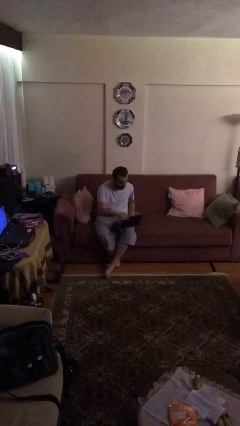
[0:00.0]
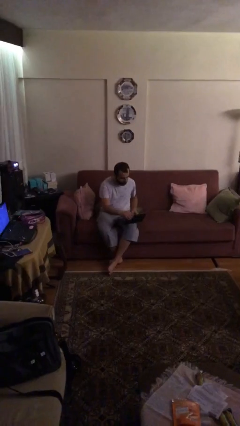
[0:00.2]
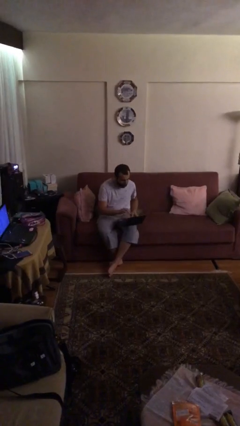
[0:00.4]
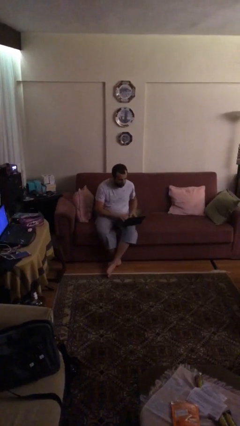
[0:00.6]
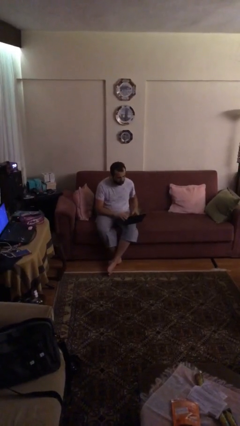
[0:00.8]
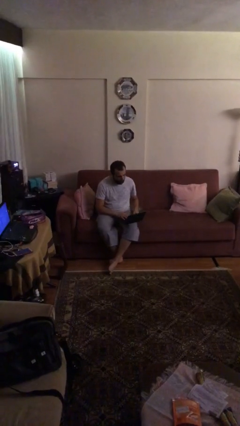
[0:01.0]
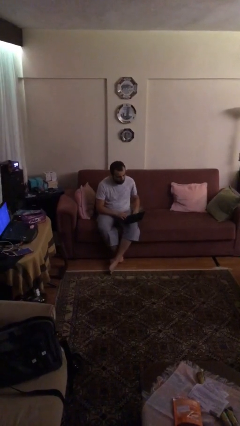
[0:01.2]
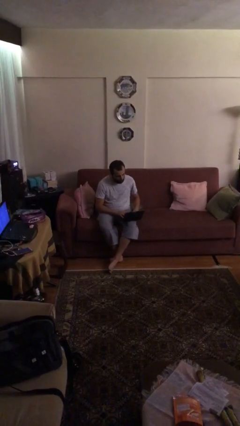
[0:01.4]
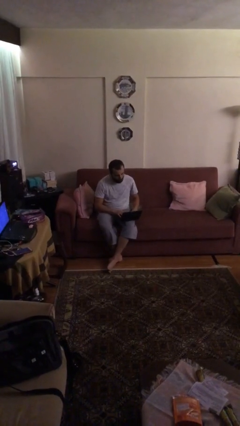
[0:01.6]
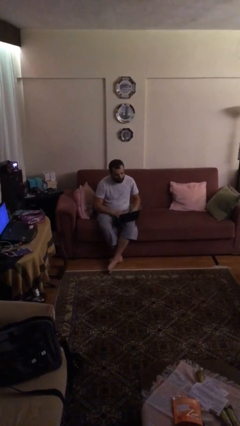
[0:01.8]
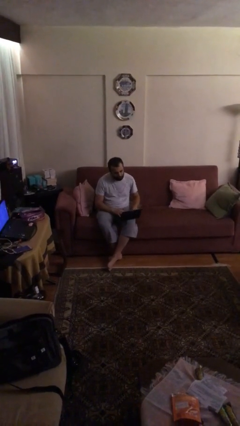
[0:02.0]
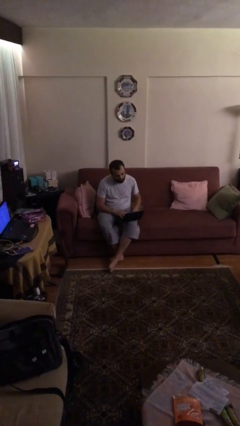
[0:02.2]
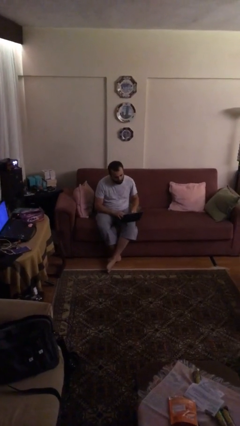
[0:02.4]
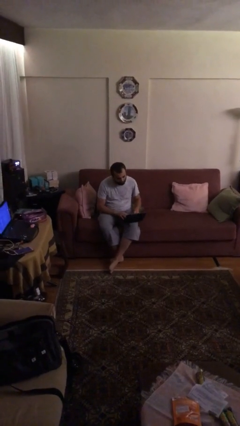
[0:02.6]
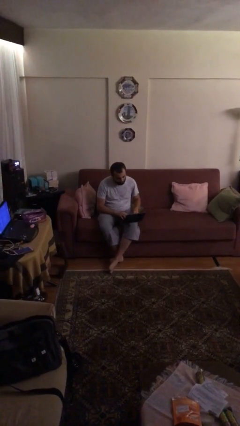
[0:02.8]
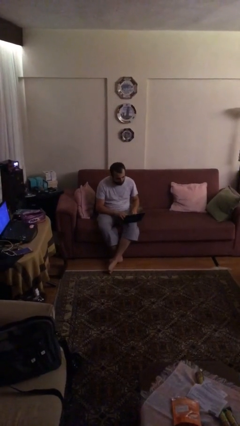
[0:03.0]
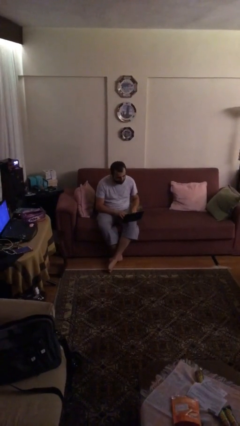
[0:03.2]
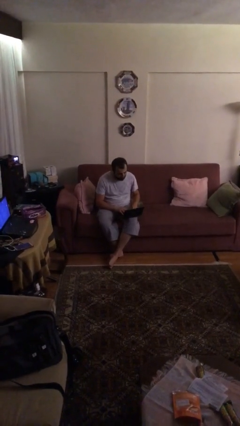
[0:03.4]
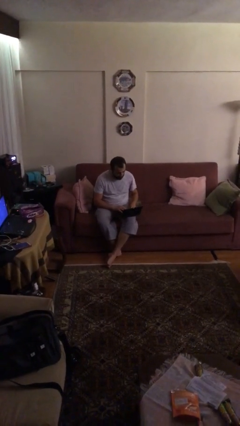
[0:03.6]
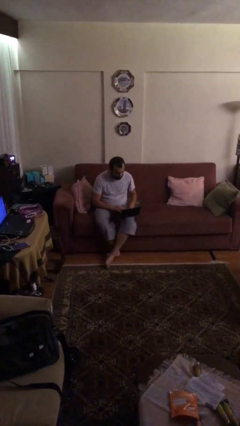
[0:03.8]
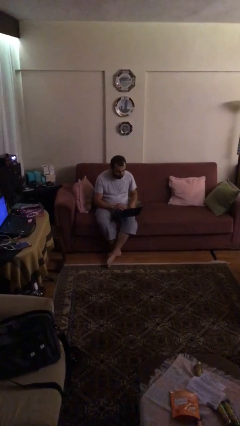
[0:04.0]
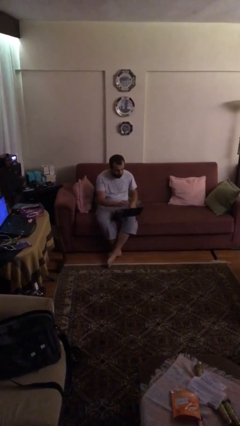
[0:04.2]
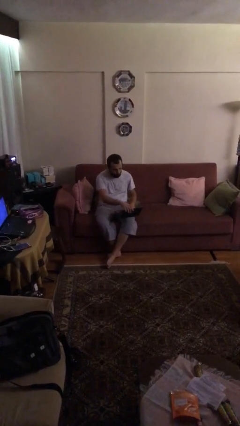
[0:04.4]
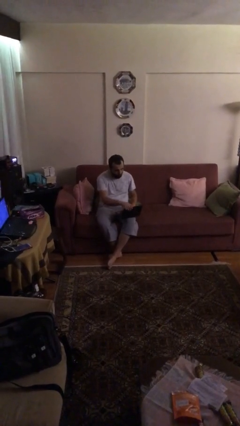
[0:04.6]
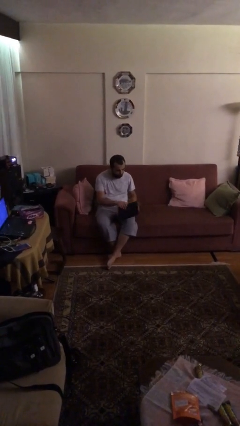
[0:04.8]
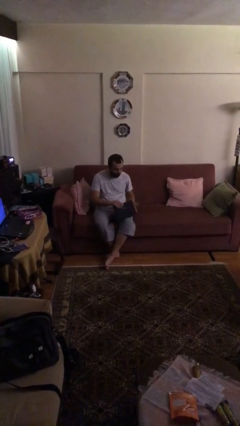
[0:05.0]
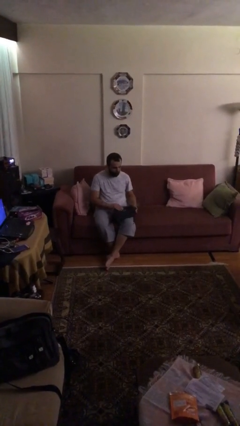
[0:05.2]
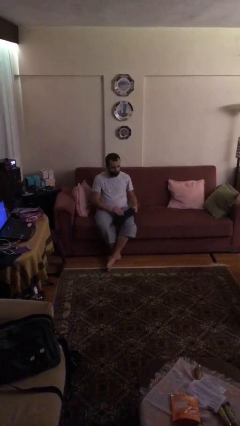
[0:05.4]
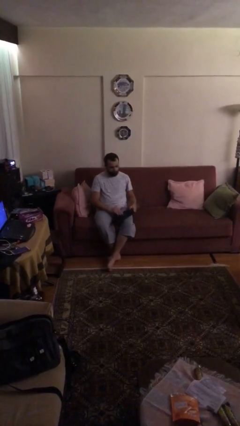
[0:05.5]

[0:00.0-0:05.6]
person interacts with laptop

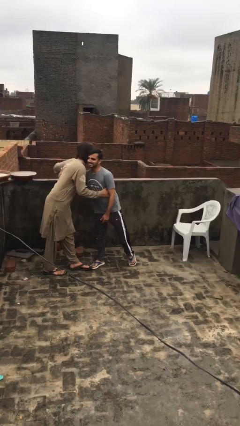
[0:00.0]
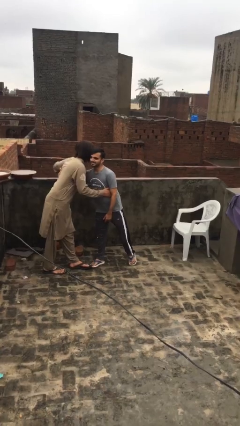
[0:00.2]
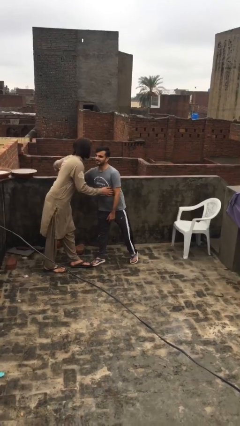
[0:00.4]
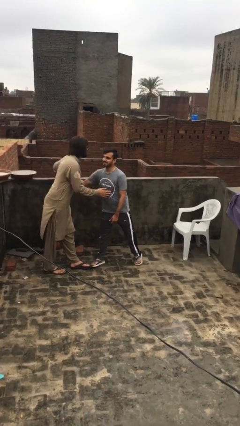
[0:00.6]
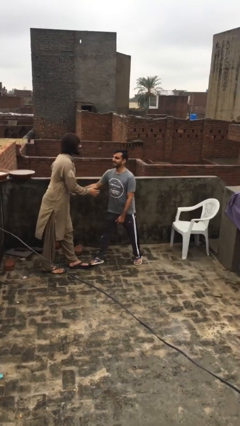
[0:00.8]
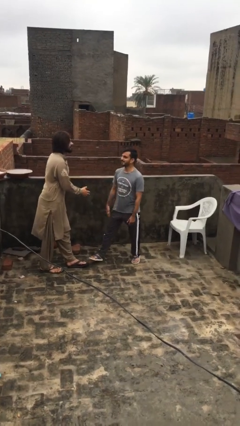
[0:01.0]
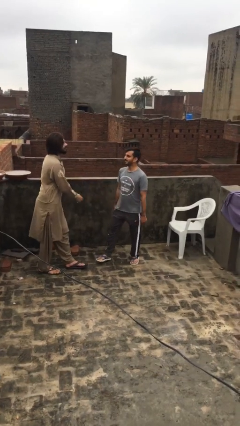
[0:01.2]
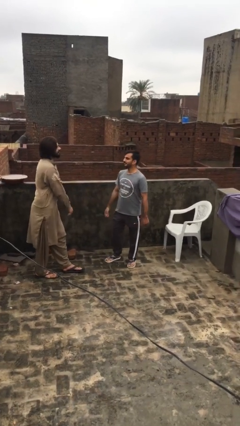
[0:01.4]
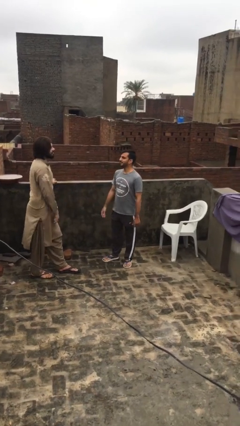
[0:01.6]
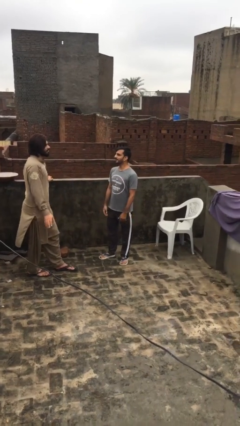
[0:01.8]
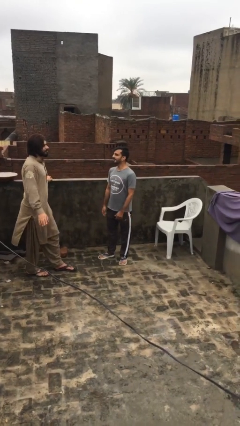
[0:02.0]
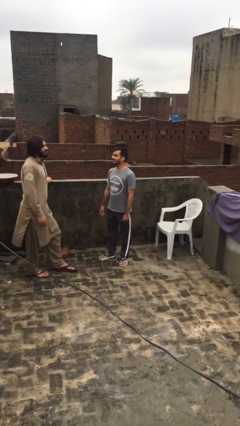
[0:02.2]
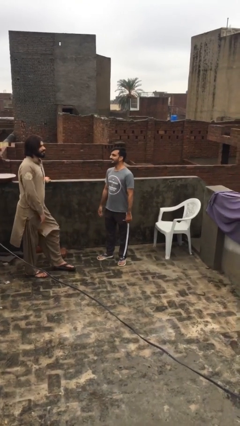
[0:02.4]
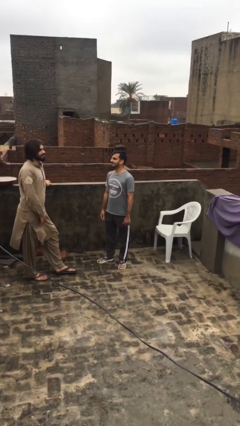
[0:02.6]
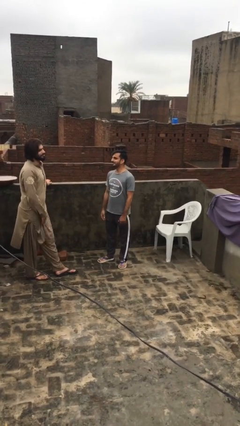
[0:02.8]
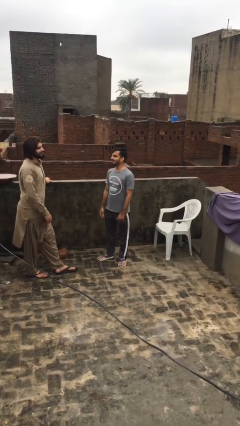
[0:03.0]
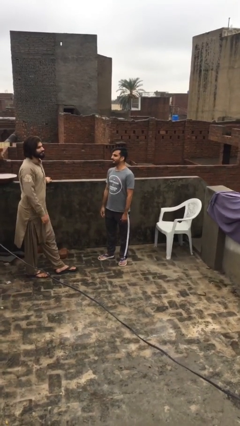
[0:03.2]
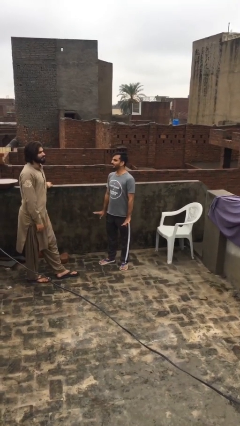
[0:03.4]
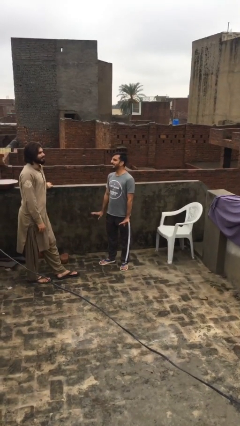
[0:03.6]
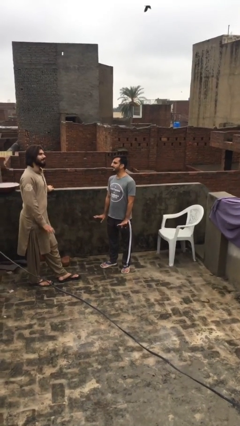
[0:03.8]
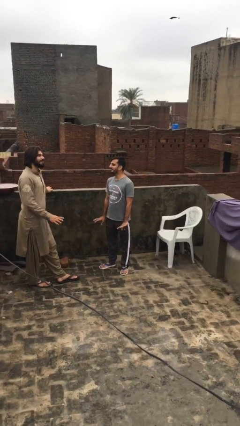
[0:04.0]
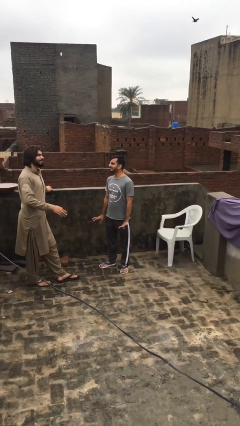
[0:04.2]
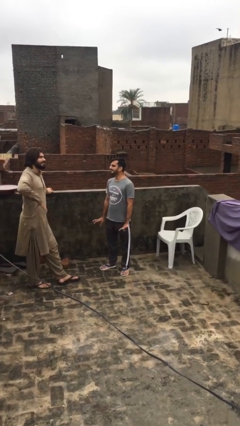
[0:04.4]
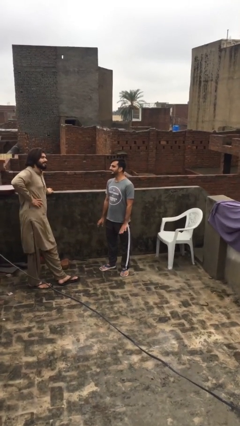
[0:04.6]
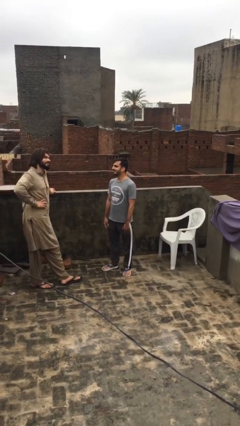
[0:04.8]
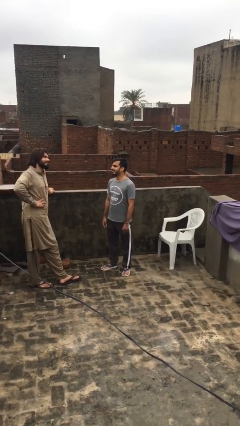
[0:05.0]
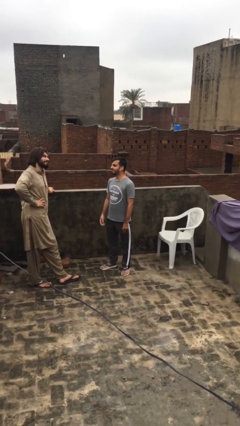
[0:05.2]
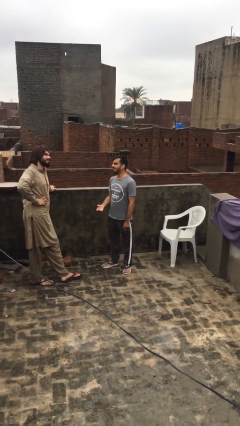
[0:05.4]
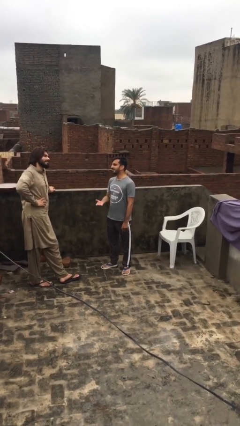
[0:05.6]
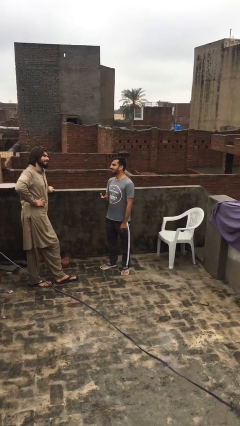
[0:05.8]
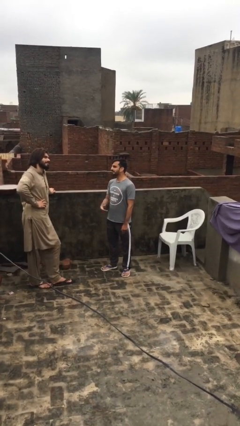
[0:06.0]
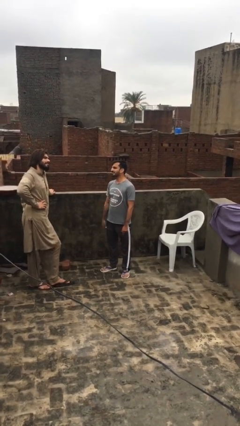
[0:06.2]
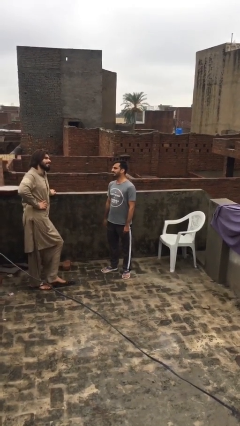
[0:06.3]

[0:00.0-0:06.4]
person talks to person

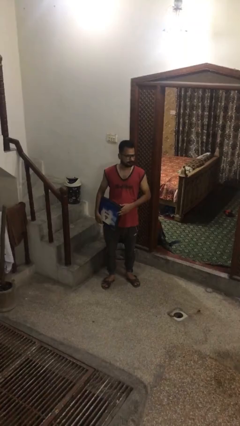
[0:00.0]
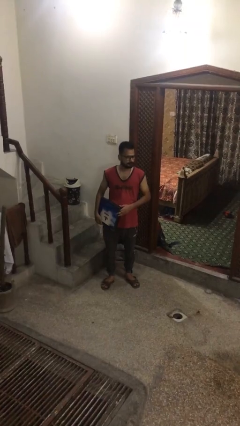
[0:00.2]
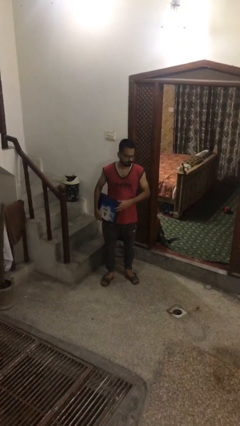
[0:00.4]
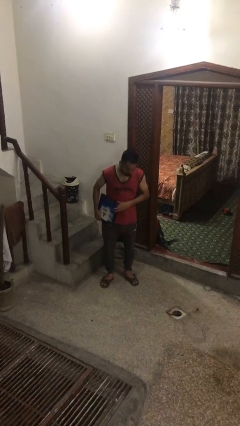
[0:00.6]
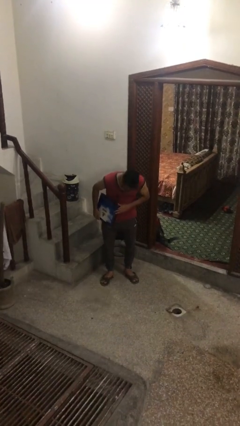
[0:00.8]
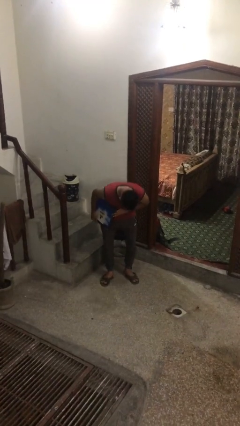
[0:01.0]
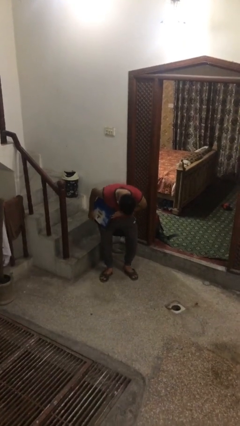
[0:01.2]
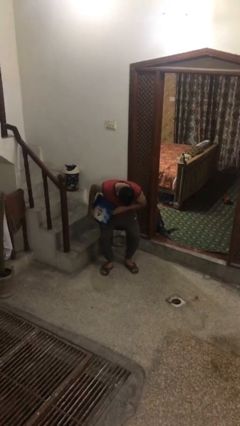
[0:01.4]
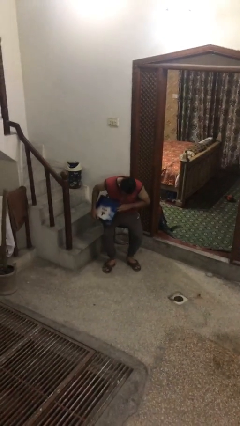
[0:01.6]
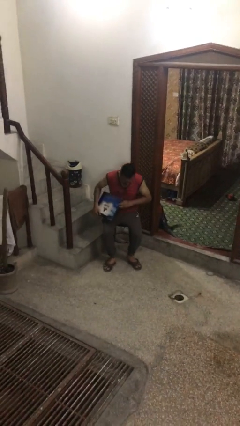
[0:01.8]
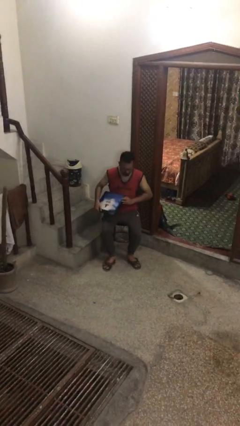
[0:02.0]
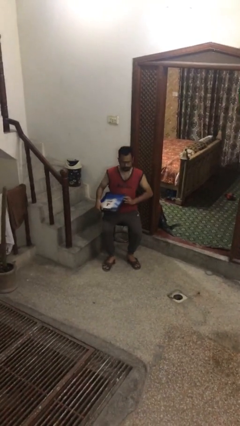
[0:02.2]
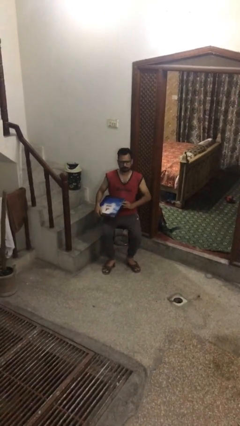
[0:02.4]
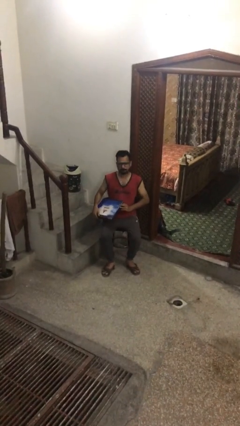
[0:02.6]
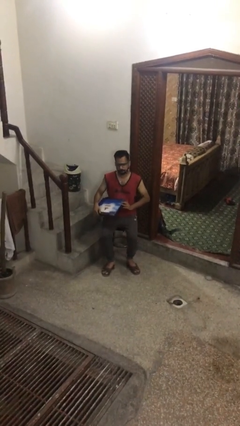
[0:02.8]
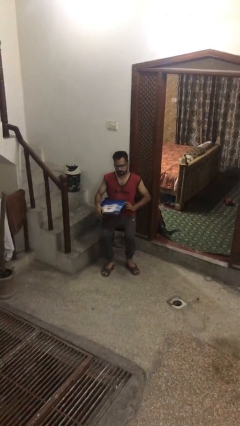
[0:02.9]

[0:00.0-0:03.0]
person sits down

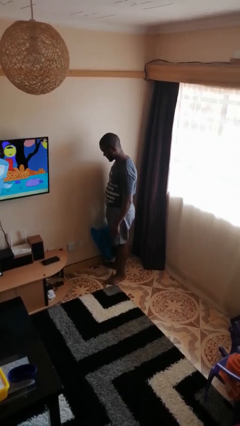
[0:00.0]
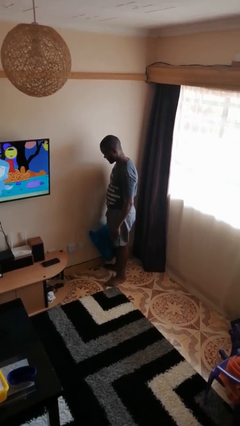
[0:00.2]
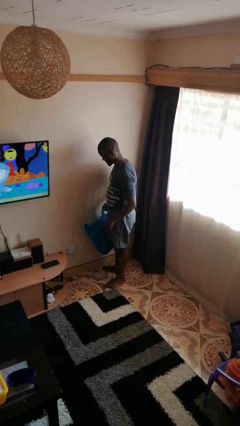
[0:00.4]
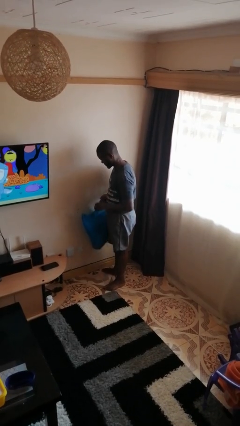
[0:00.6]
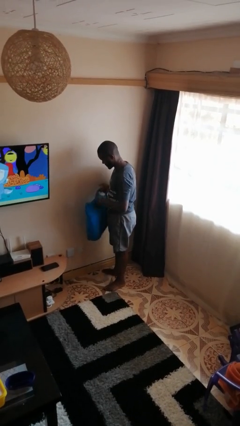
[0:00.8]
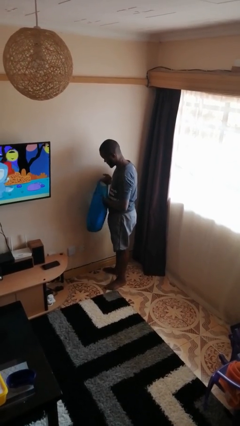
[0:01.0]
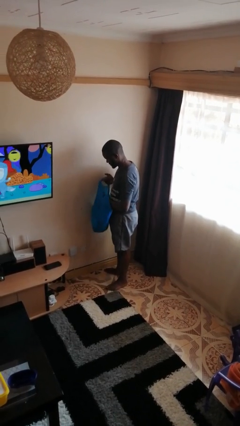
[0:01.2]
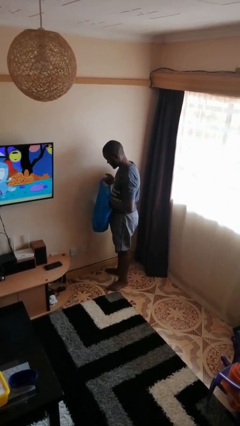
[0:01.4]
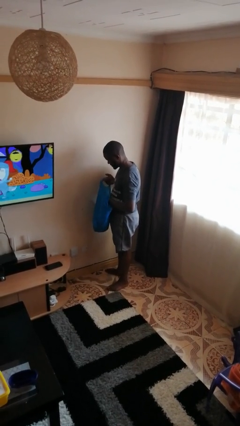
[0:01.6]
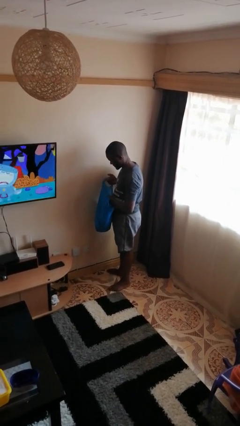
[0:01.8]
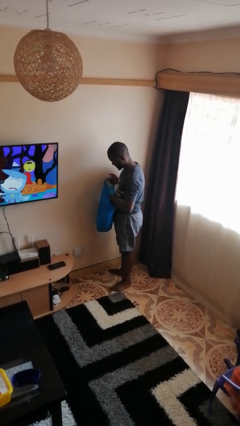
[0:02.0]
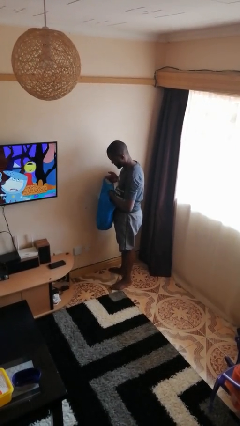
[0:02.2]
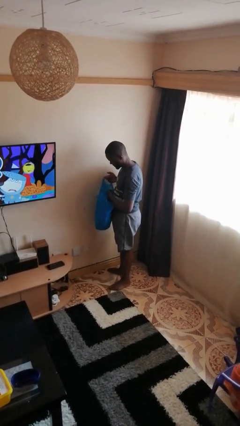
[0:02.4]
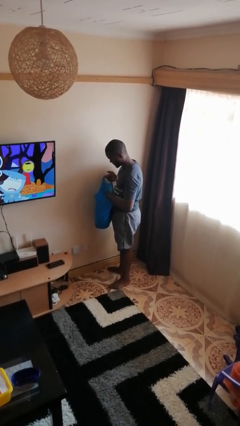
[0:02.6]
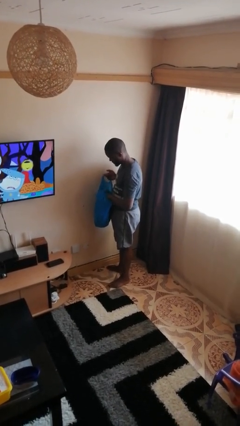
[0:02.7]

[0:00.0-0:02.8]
person searches in bag

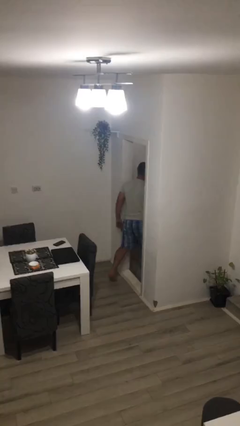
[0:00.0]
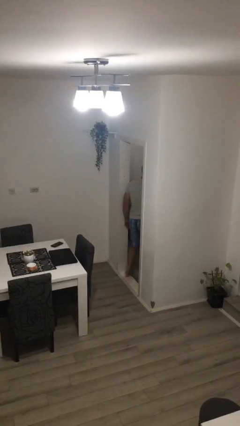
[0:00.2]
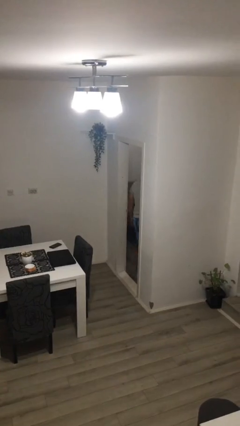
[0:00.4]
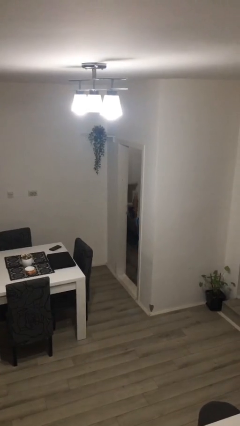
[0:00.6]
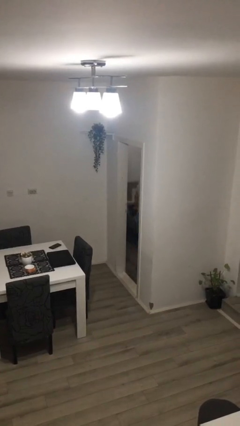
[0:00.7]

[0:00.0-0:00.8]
person exits scene through structure
